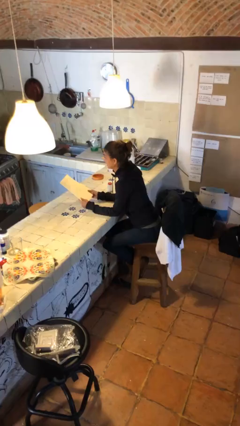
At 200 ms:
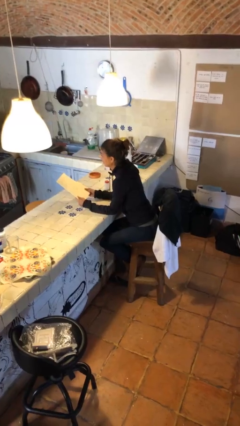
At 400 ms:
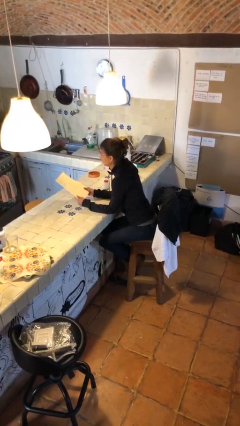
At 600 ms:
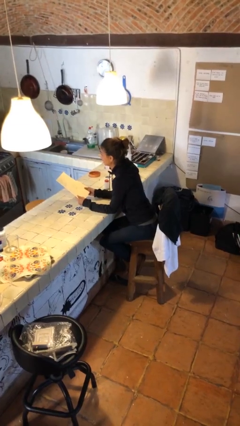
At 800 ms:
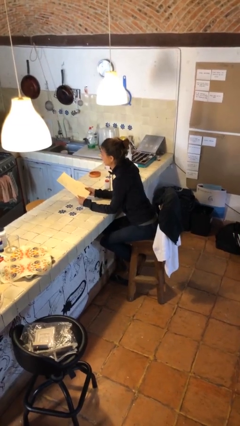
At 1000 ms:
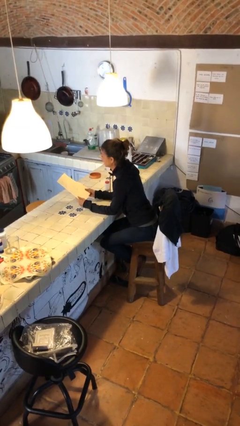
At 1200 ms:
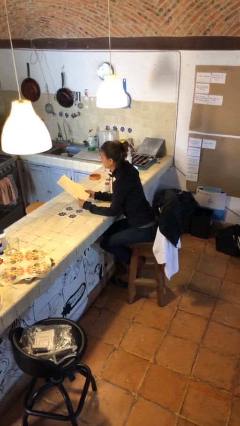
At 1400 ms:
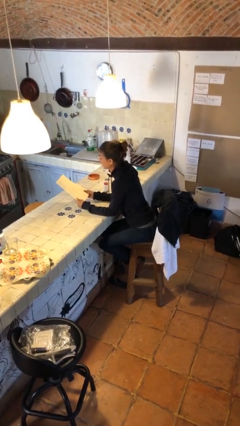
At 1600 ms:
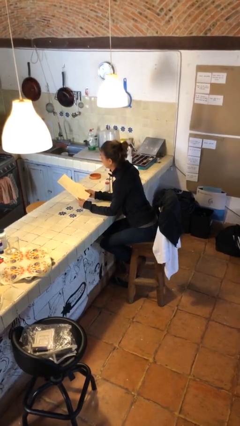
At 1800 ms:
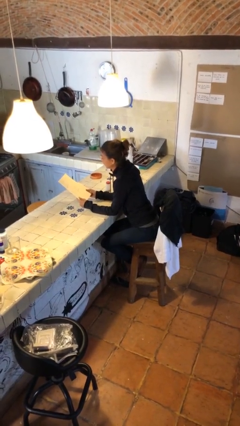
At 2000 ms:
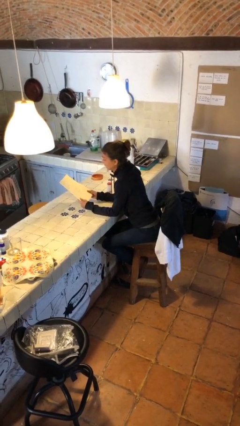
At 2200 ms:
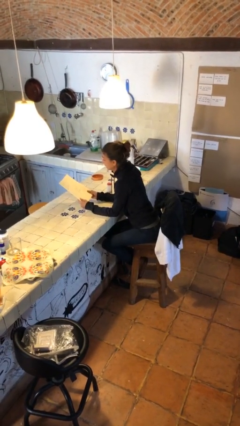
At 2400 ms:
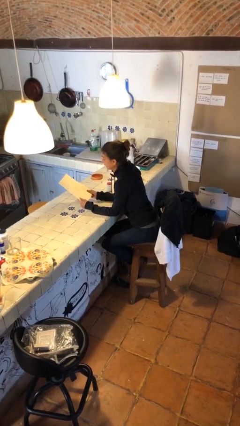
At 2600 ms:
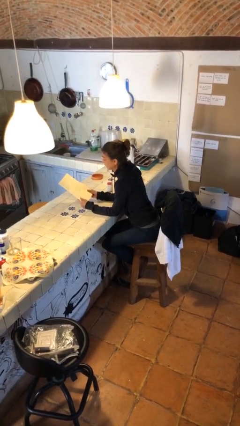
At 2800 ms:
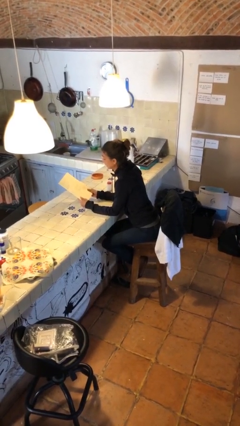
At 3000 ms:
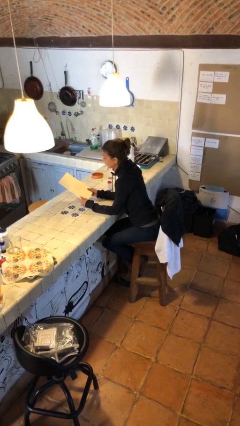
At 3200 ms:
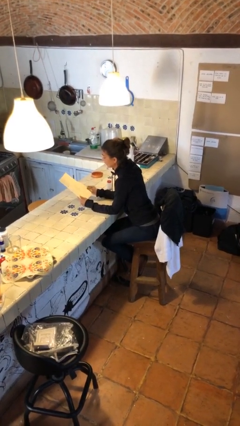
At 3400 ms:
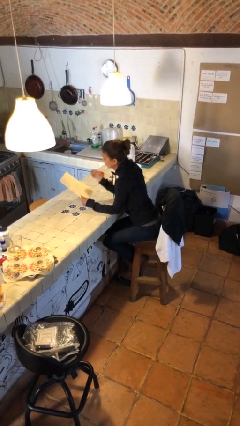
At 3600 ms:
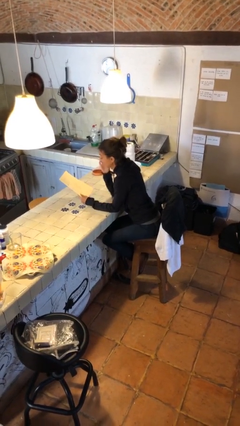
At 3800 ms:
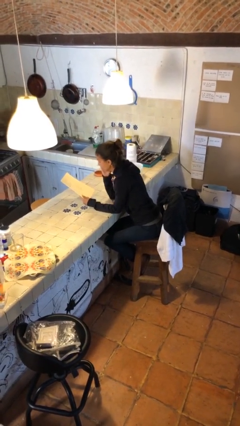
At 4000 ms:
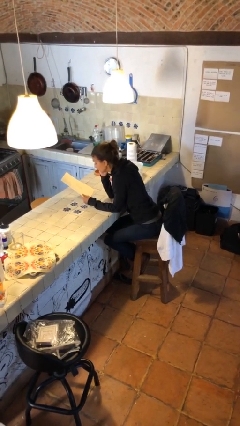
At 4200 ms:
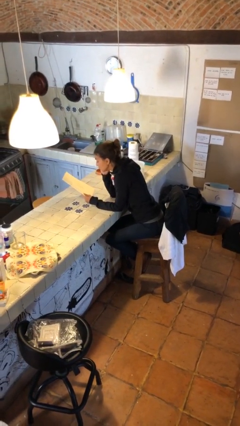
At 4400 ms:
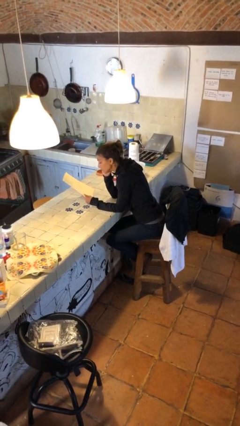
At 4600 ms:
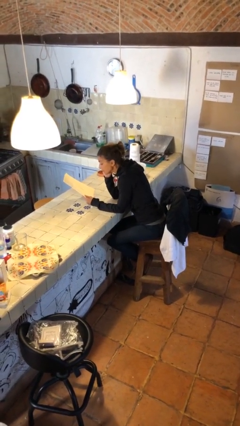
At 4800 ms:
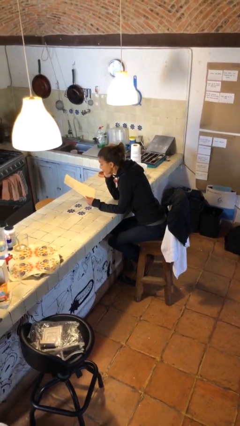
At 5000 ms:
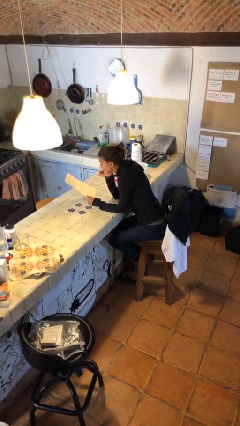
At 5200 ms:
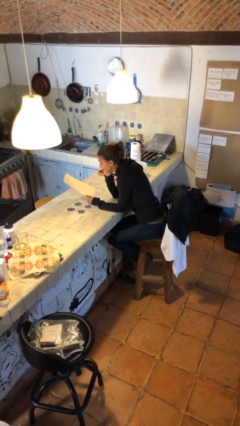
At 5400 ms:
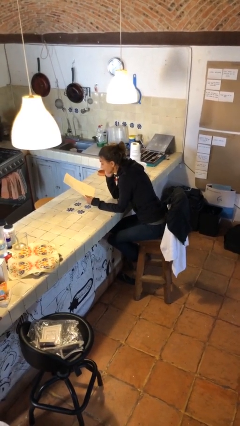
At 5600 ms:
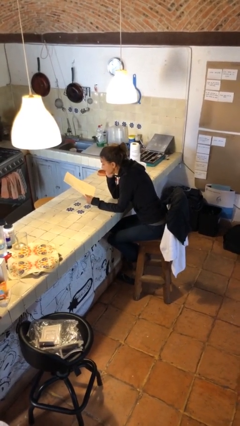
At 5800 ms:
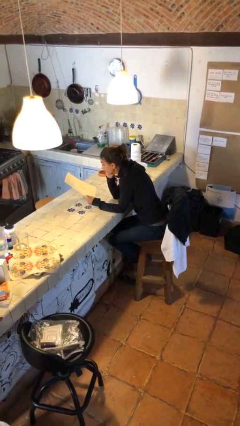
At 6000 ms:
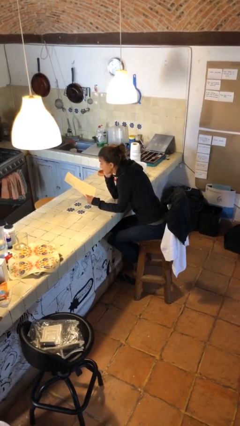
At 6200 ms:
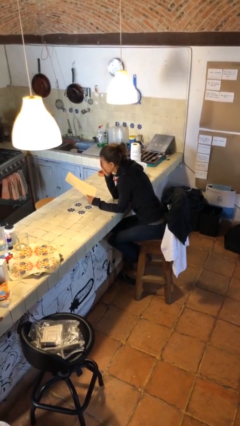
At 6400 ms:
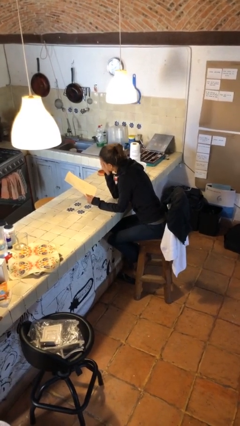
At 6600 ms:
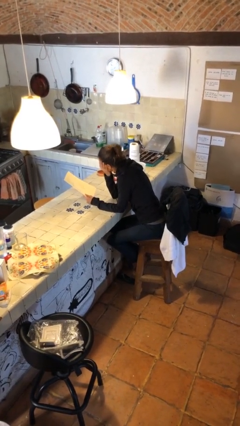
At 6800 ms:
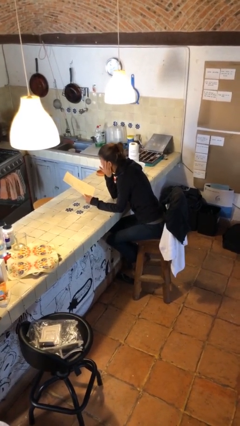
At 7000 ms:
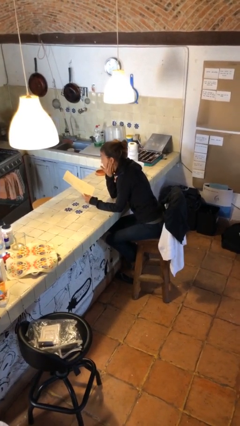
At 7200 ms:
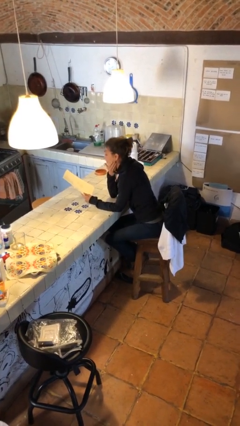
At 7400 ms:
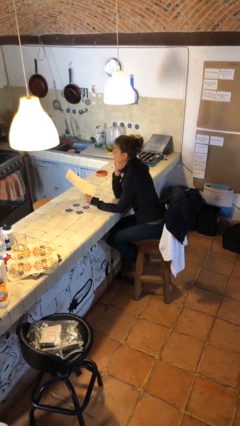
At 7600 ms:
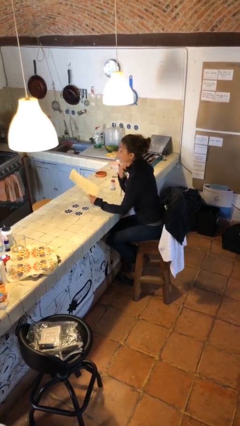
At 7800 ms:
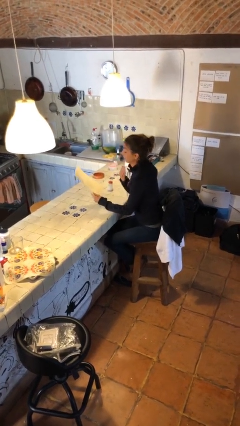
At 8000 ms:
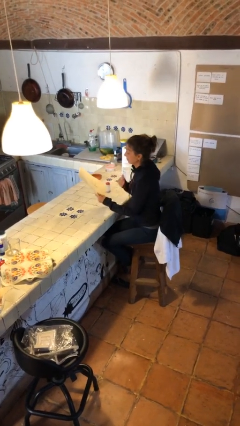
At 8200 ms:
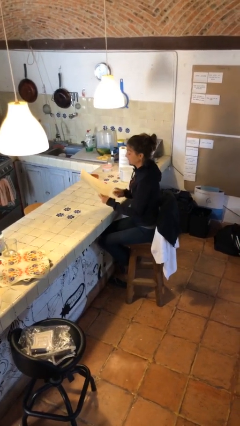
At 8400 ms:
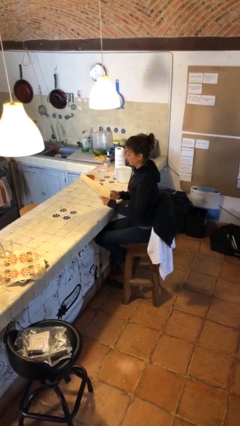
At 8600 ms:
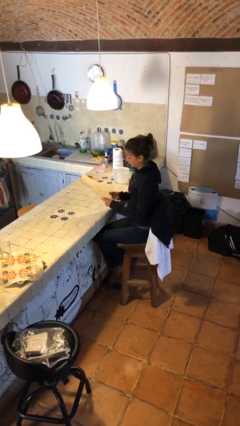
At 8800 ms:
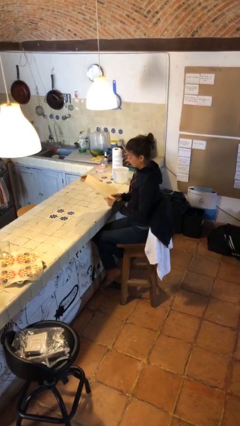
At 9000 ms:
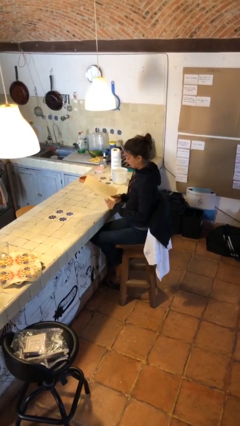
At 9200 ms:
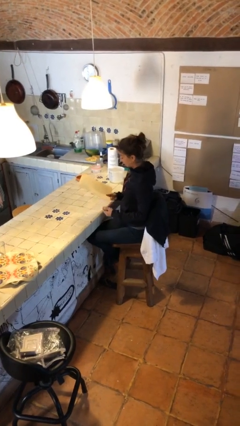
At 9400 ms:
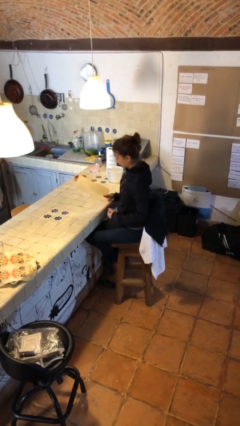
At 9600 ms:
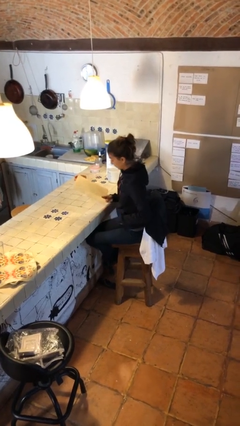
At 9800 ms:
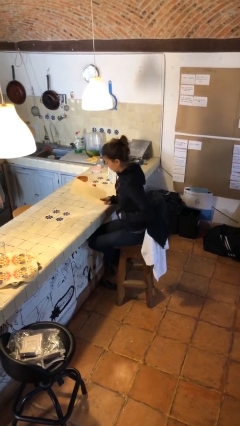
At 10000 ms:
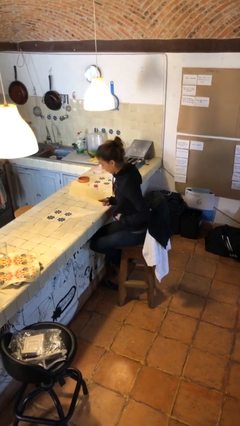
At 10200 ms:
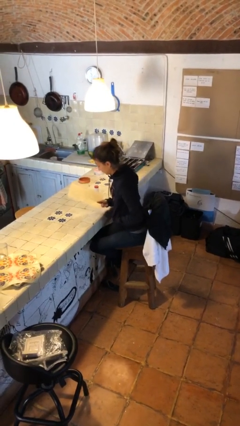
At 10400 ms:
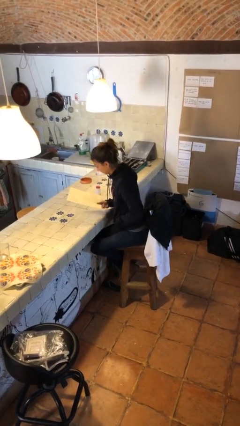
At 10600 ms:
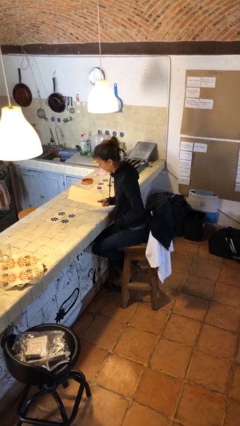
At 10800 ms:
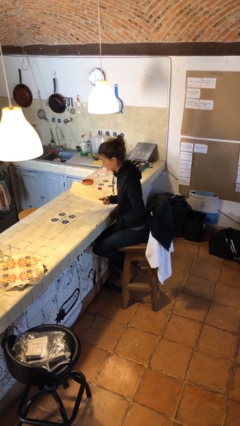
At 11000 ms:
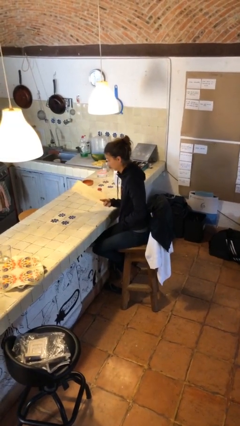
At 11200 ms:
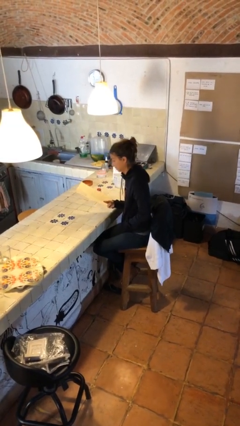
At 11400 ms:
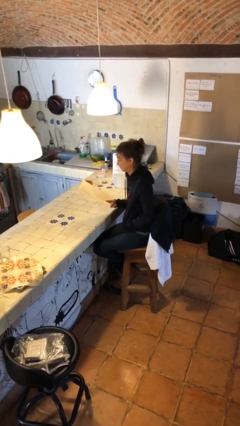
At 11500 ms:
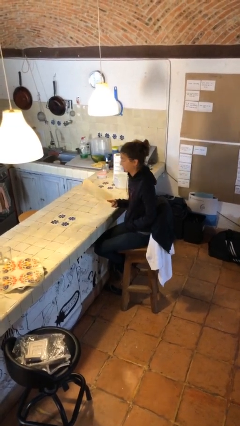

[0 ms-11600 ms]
person reads document

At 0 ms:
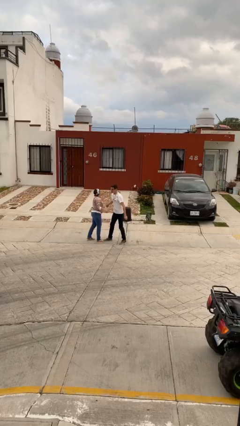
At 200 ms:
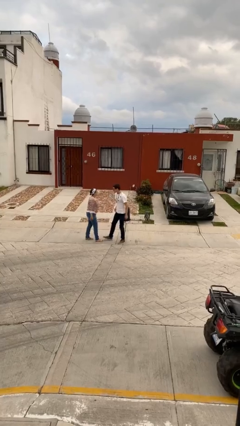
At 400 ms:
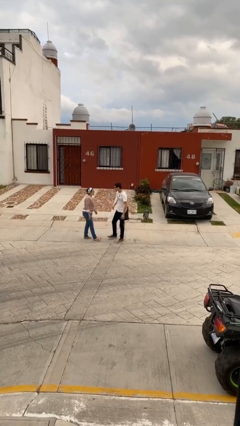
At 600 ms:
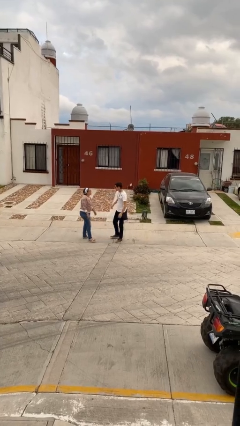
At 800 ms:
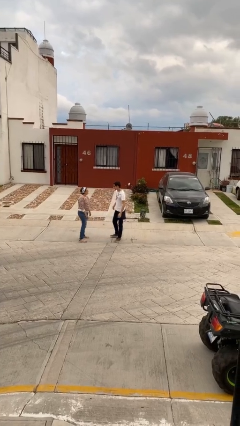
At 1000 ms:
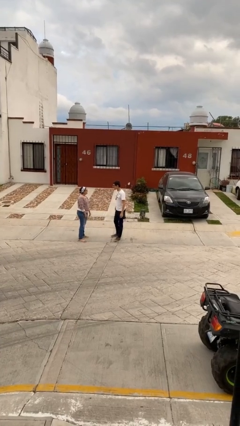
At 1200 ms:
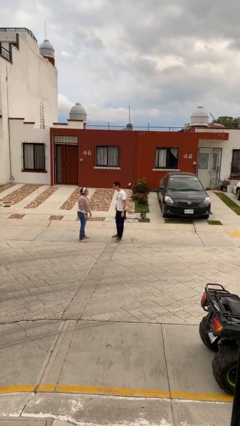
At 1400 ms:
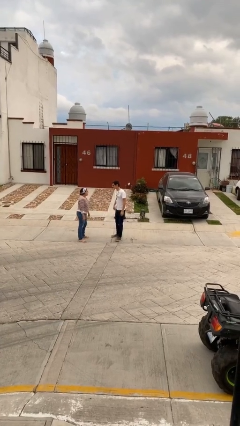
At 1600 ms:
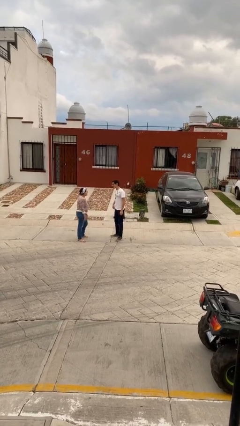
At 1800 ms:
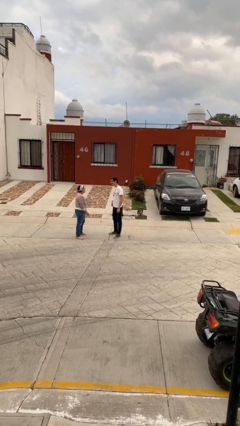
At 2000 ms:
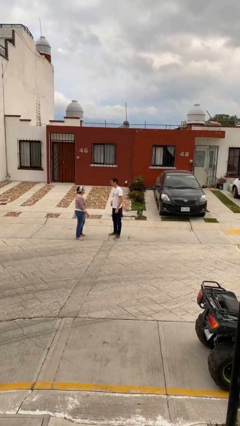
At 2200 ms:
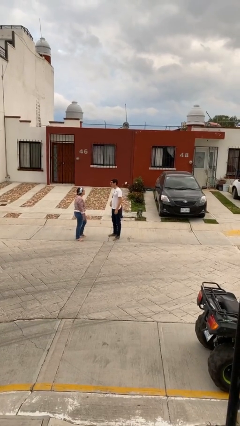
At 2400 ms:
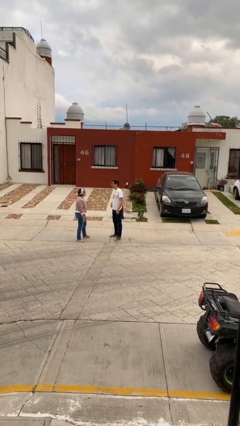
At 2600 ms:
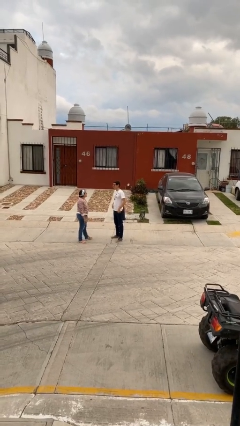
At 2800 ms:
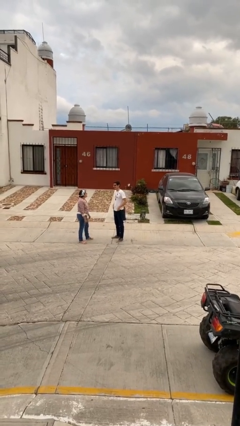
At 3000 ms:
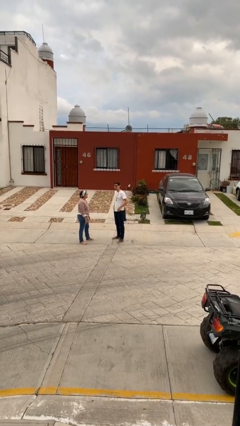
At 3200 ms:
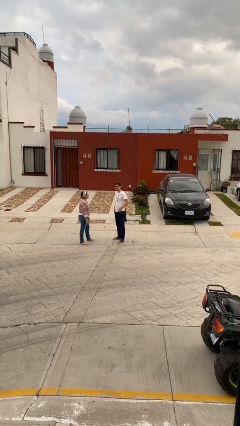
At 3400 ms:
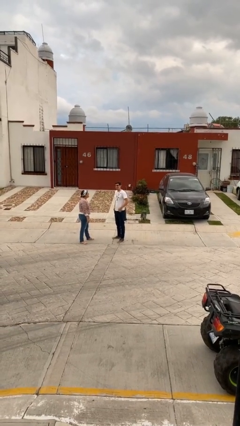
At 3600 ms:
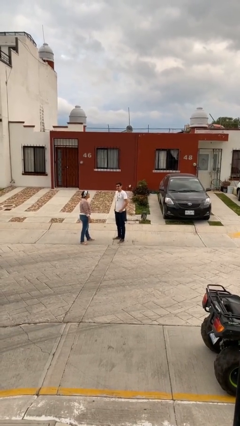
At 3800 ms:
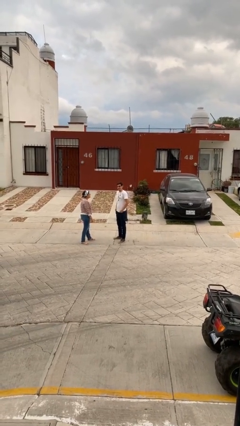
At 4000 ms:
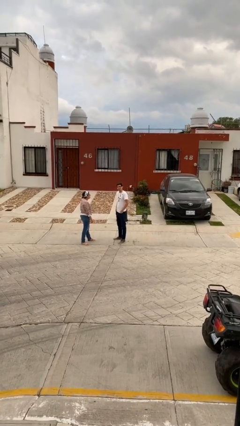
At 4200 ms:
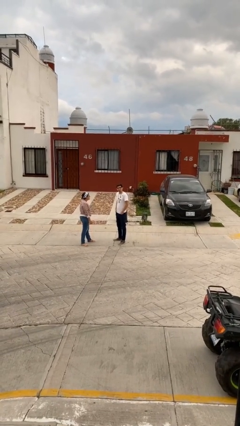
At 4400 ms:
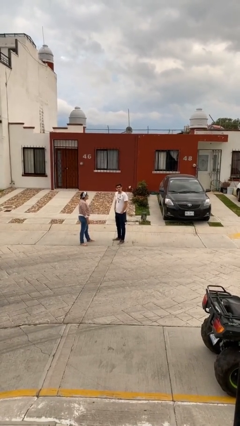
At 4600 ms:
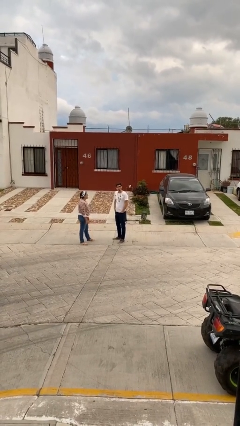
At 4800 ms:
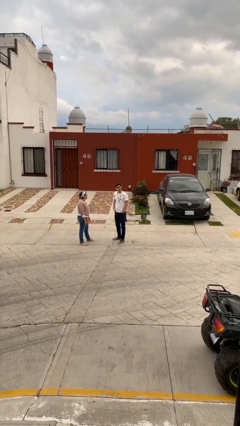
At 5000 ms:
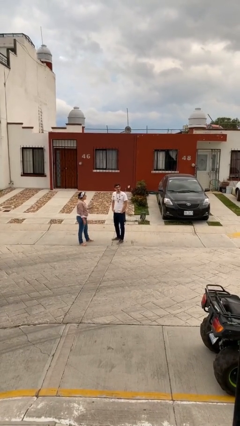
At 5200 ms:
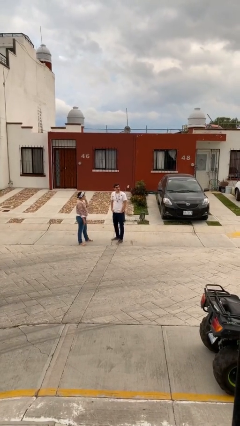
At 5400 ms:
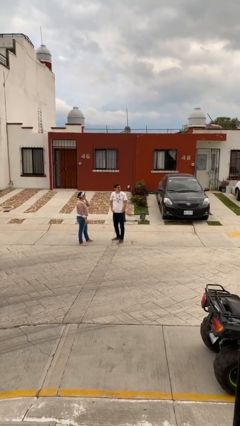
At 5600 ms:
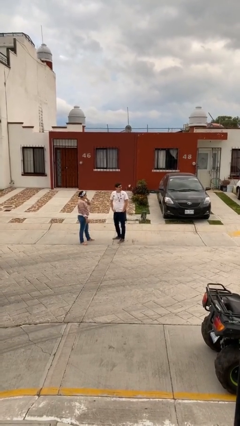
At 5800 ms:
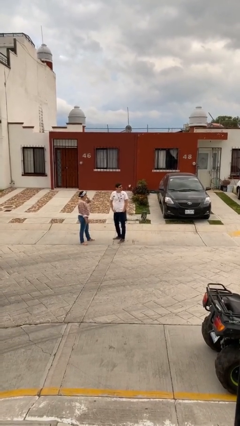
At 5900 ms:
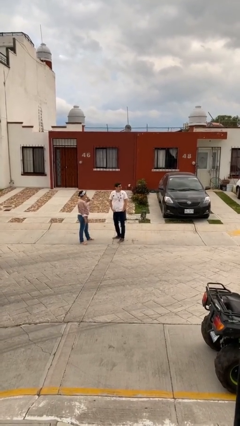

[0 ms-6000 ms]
person talks to person

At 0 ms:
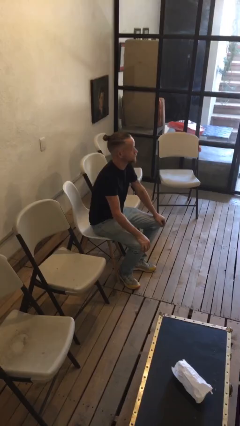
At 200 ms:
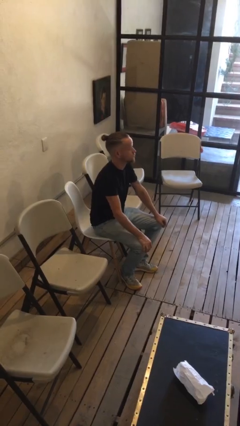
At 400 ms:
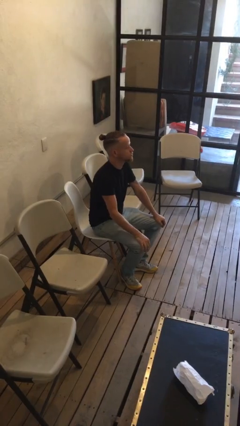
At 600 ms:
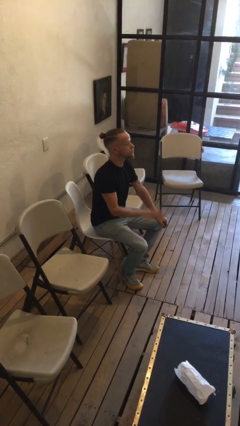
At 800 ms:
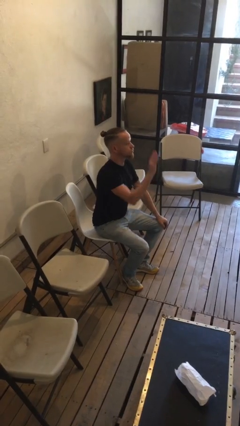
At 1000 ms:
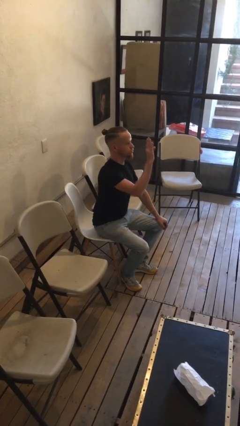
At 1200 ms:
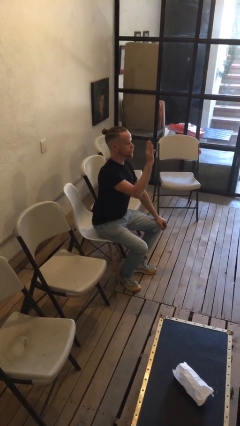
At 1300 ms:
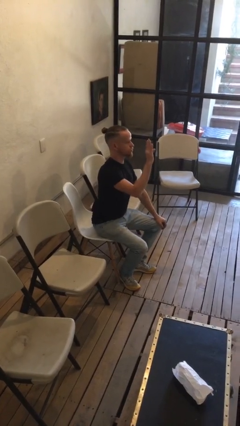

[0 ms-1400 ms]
person gestures raise hand
